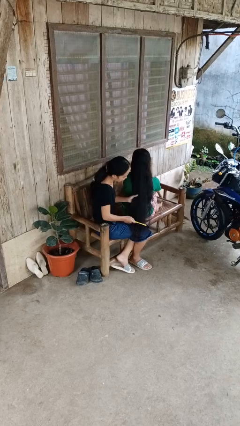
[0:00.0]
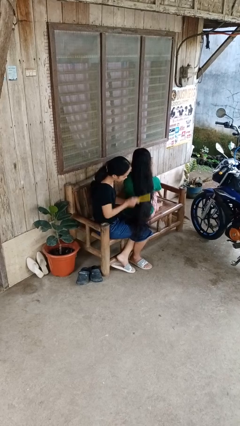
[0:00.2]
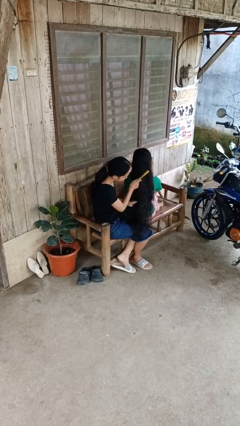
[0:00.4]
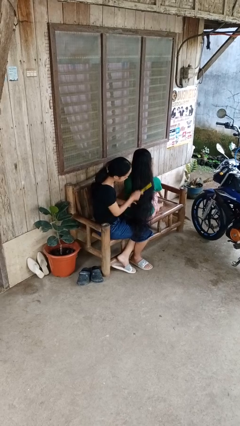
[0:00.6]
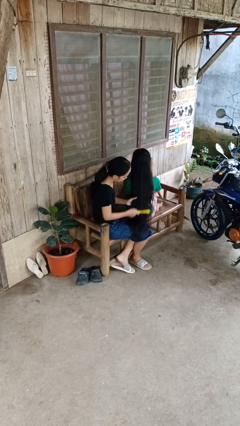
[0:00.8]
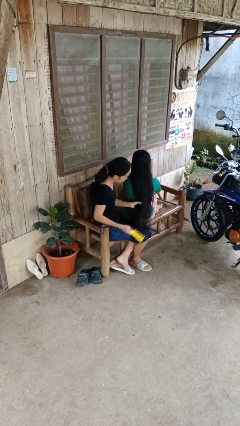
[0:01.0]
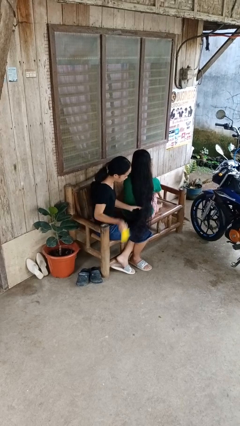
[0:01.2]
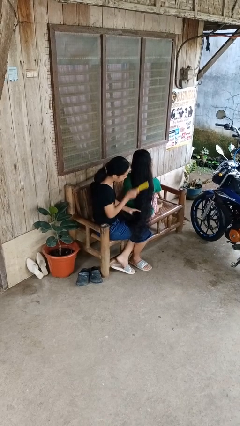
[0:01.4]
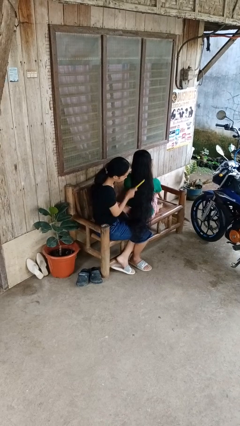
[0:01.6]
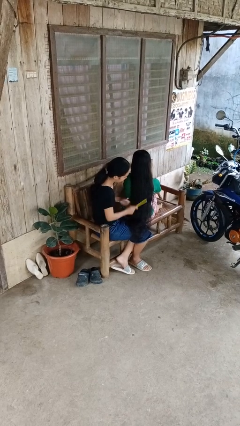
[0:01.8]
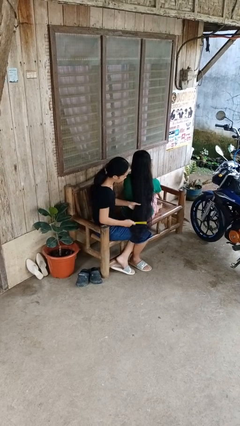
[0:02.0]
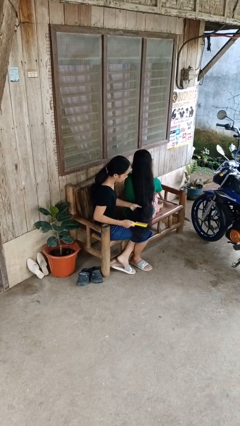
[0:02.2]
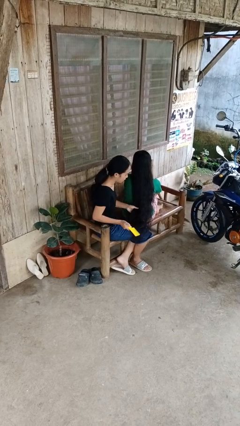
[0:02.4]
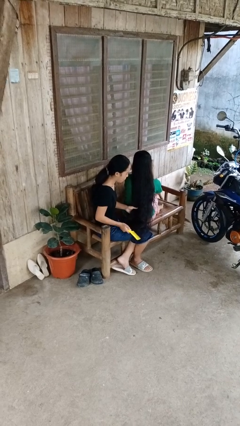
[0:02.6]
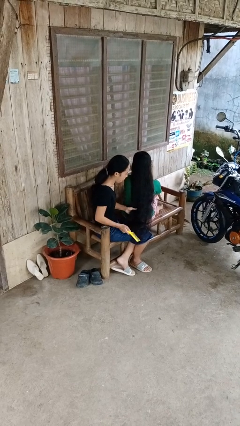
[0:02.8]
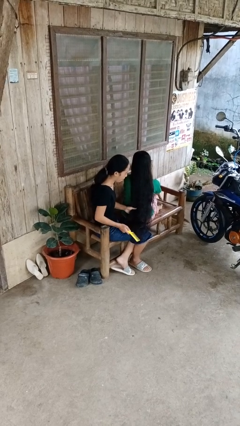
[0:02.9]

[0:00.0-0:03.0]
person brushes hair of person

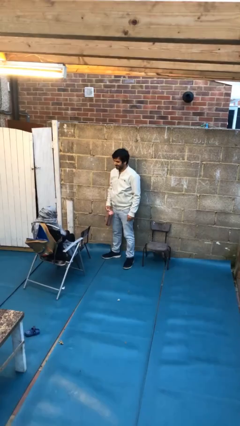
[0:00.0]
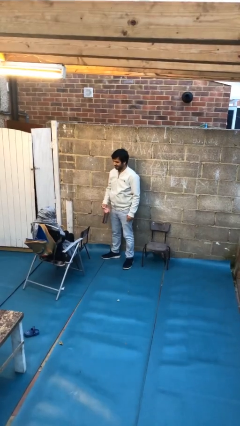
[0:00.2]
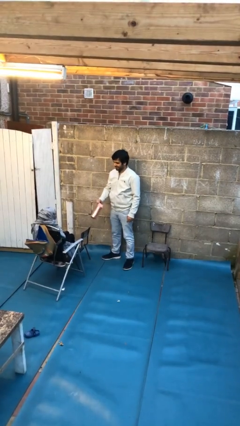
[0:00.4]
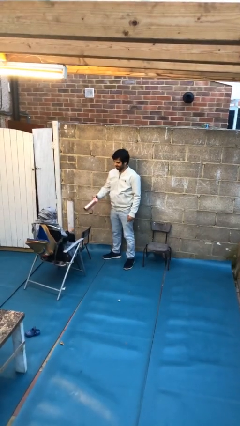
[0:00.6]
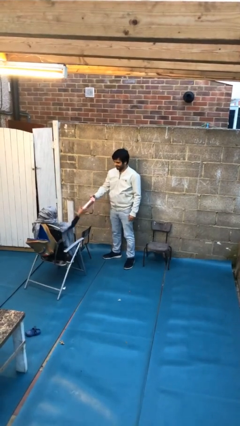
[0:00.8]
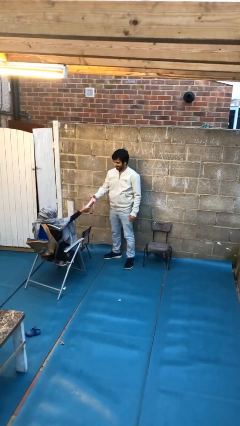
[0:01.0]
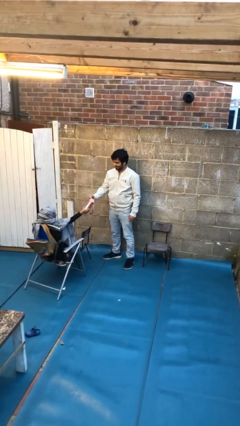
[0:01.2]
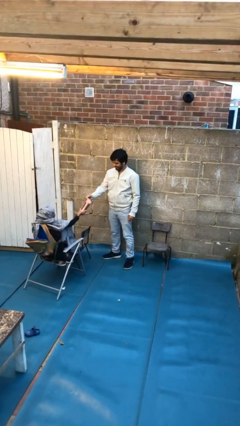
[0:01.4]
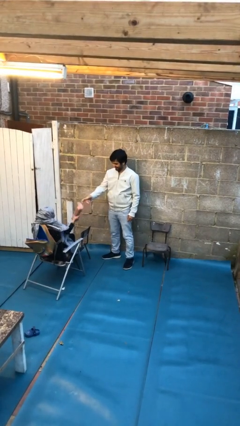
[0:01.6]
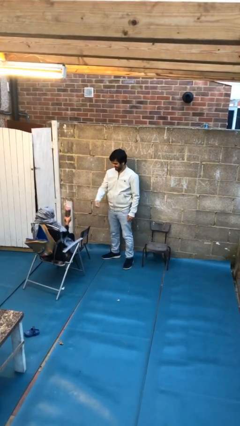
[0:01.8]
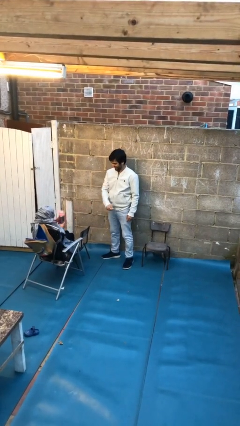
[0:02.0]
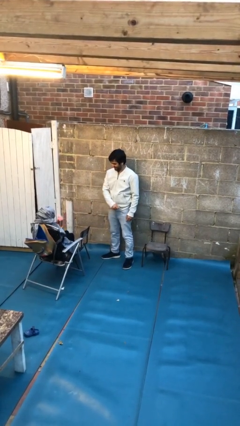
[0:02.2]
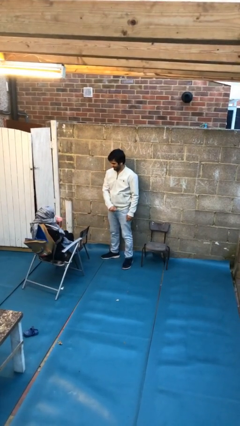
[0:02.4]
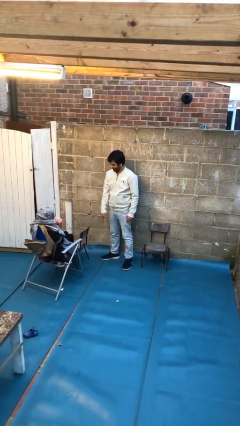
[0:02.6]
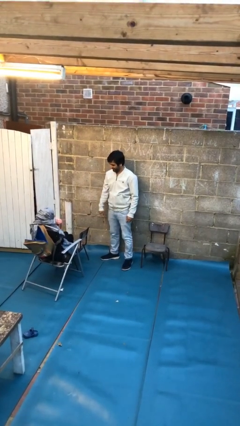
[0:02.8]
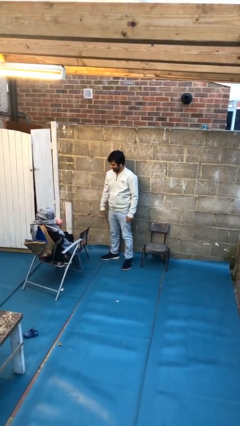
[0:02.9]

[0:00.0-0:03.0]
person transfers object to person

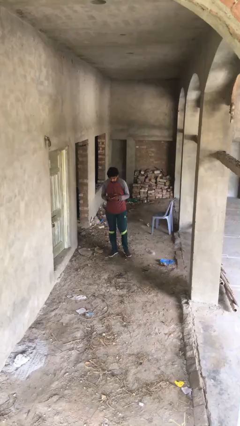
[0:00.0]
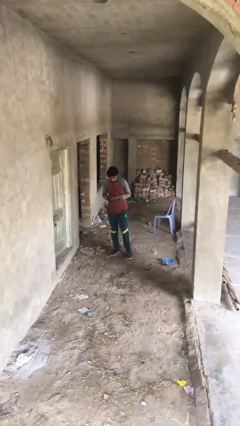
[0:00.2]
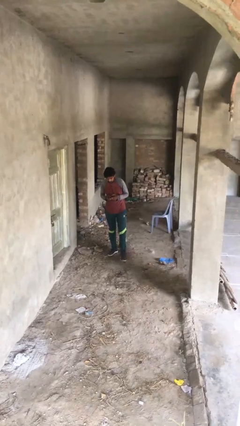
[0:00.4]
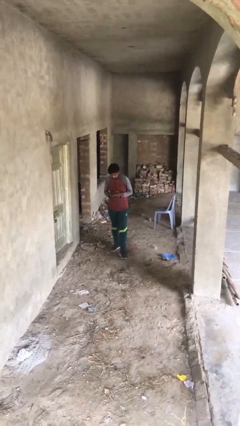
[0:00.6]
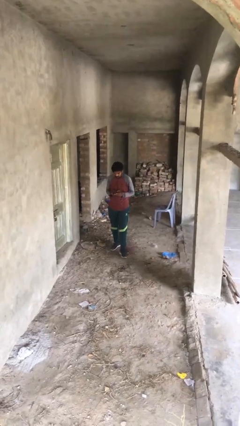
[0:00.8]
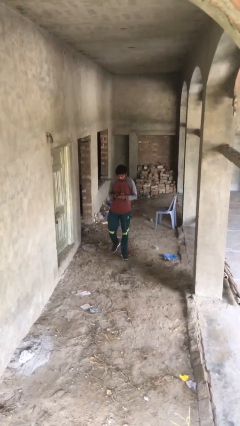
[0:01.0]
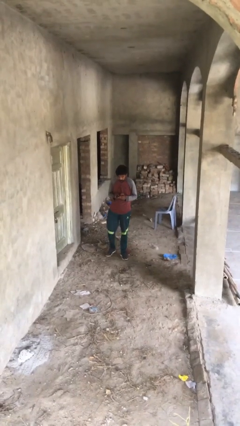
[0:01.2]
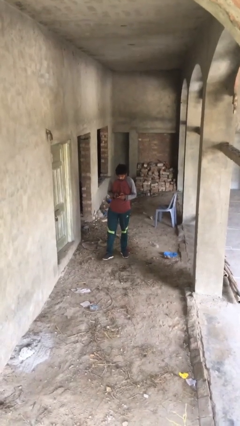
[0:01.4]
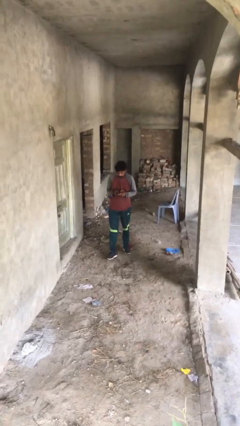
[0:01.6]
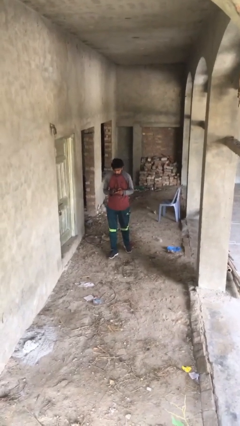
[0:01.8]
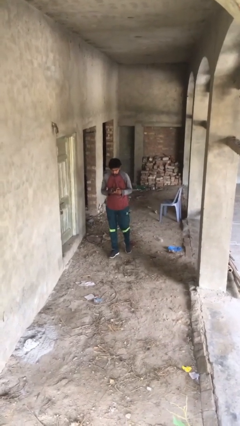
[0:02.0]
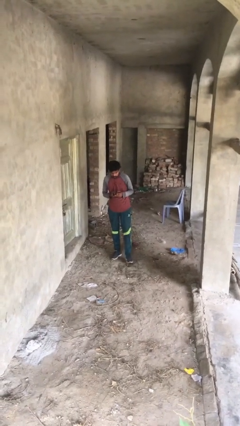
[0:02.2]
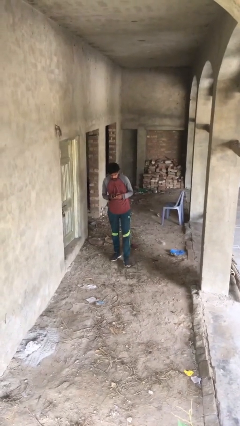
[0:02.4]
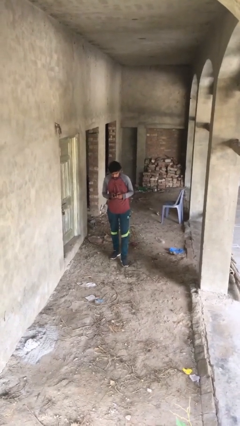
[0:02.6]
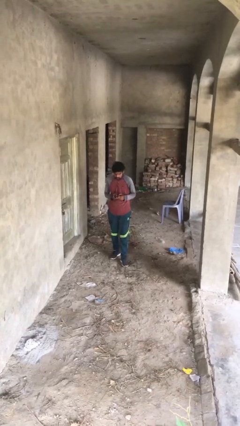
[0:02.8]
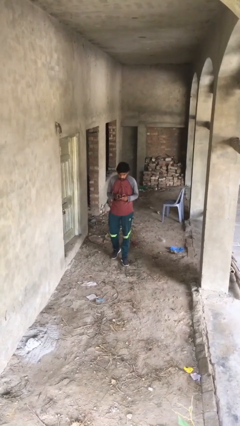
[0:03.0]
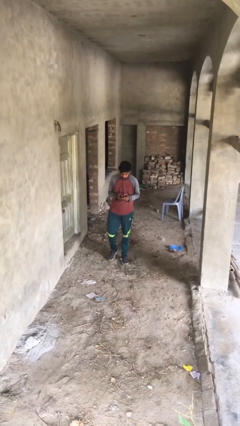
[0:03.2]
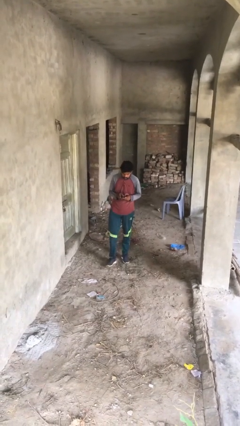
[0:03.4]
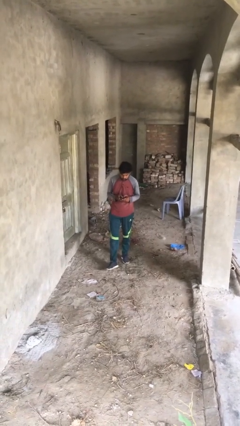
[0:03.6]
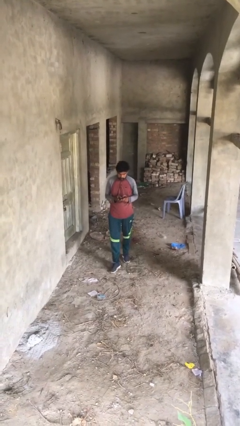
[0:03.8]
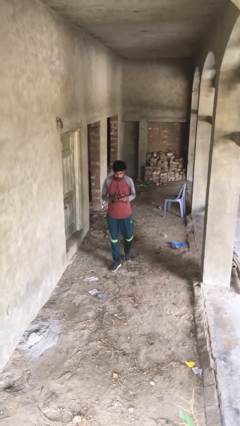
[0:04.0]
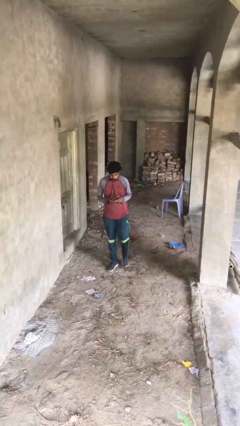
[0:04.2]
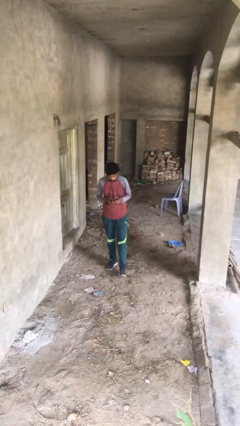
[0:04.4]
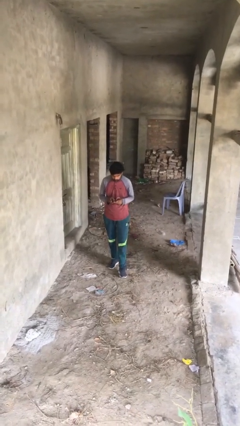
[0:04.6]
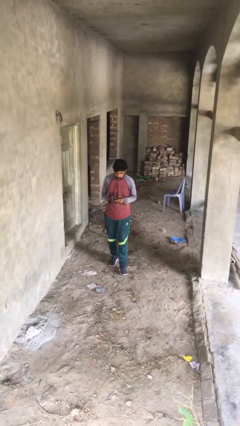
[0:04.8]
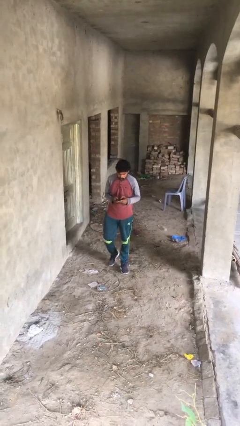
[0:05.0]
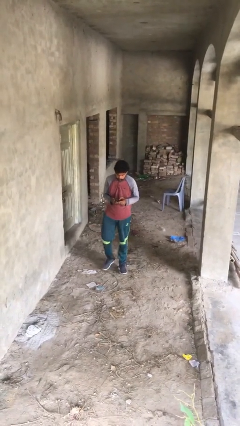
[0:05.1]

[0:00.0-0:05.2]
person texts on phone

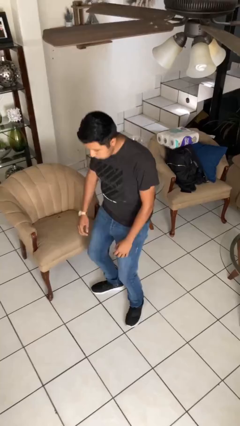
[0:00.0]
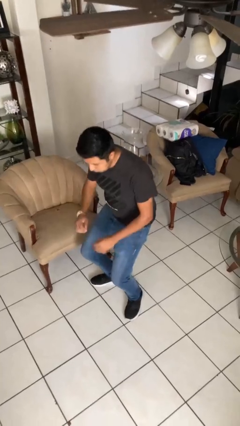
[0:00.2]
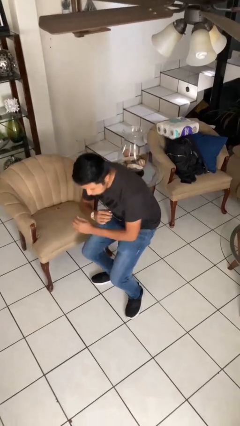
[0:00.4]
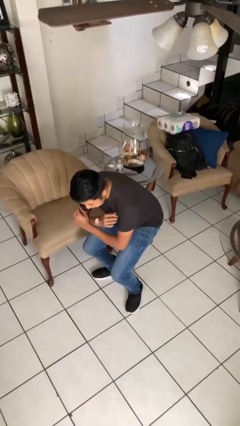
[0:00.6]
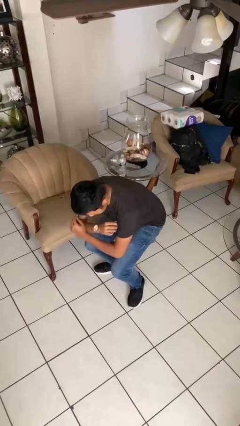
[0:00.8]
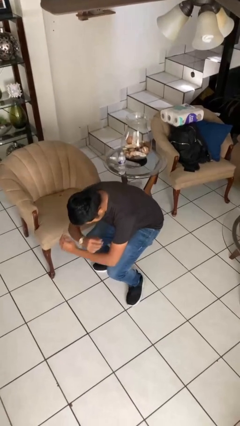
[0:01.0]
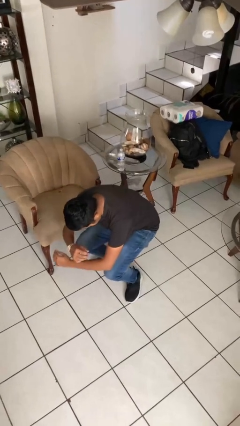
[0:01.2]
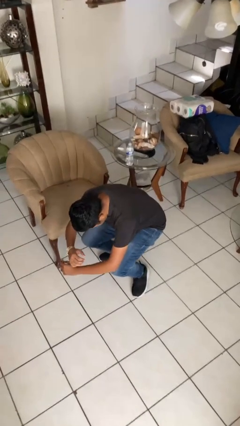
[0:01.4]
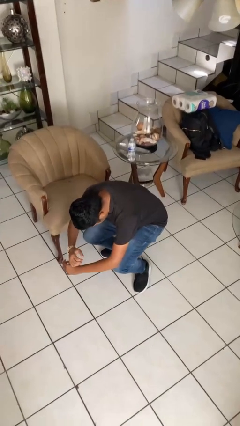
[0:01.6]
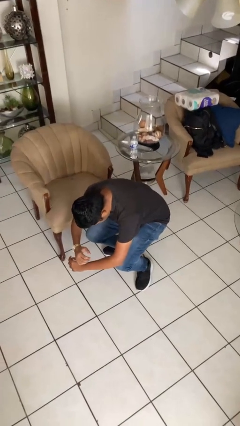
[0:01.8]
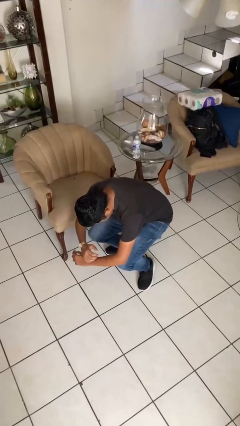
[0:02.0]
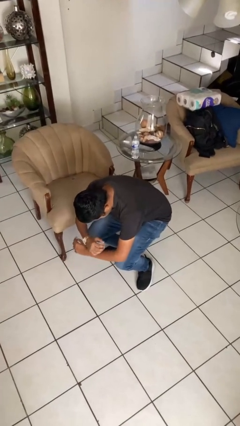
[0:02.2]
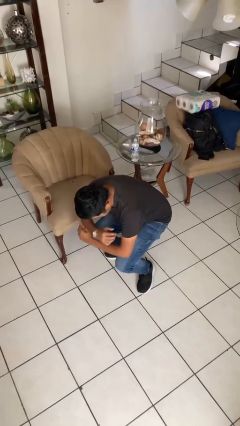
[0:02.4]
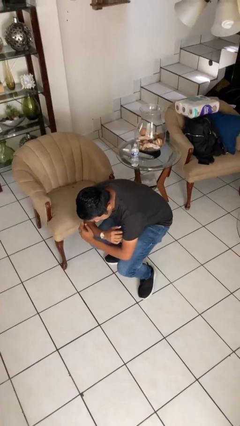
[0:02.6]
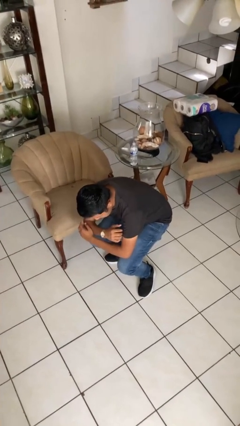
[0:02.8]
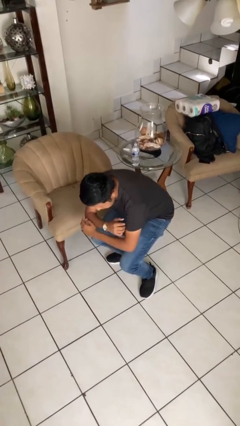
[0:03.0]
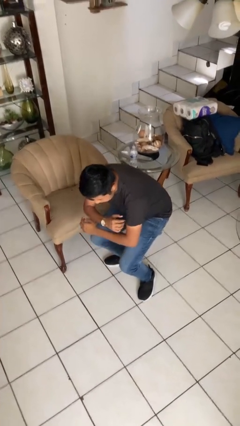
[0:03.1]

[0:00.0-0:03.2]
person squats

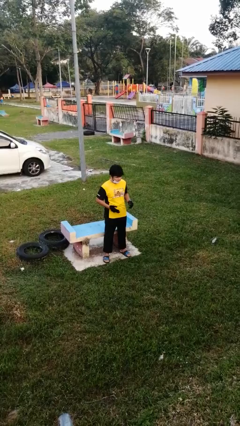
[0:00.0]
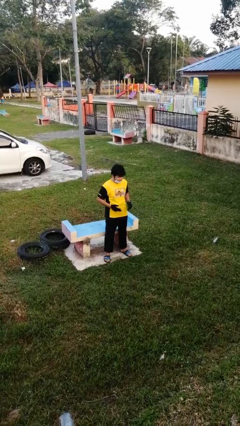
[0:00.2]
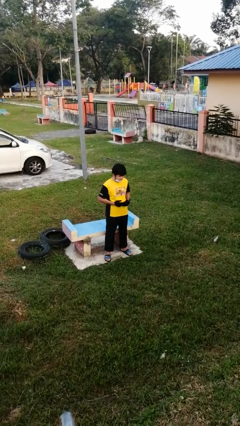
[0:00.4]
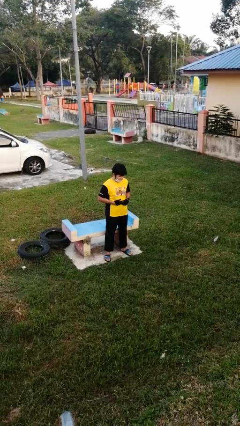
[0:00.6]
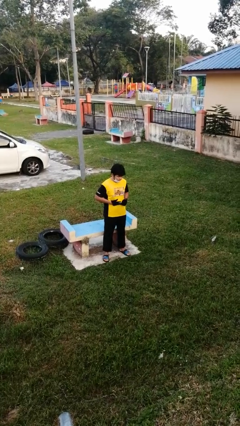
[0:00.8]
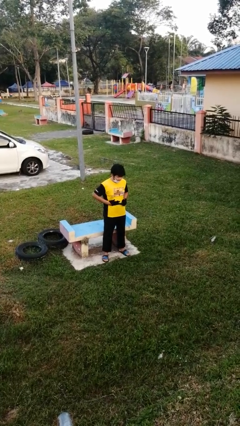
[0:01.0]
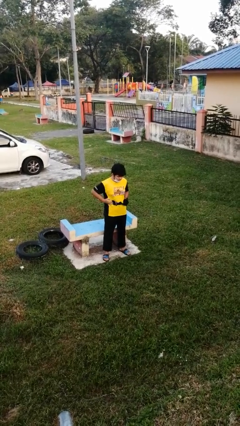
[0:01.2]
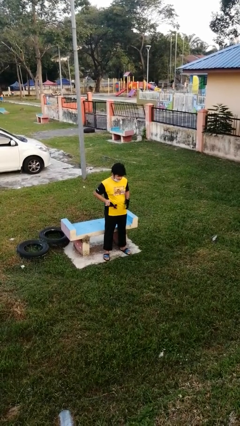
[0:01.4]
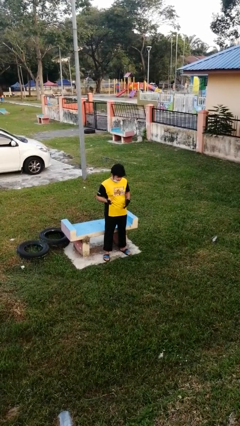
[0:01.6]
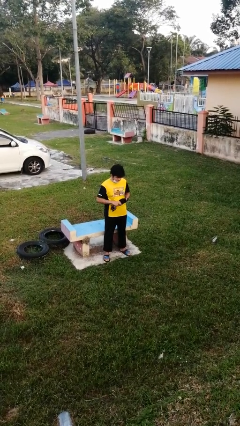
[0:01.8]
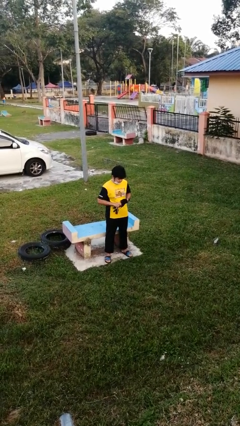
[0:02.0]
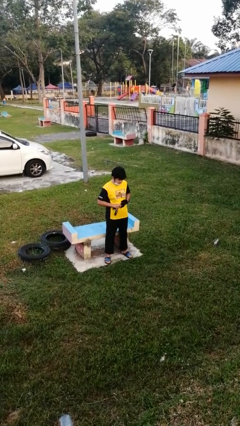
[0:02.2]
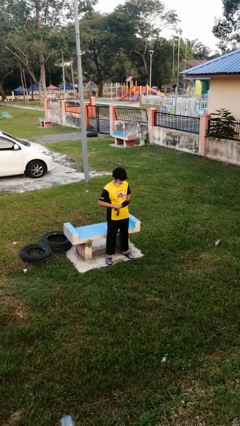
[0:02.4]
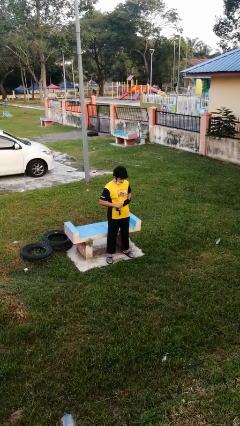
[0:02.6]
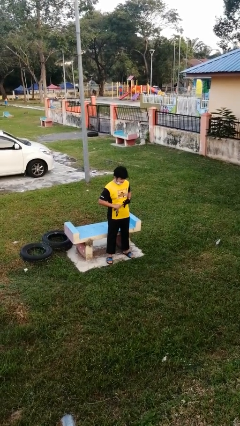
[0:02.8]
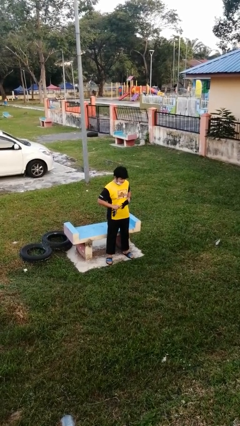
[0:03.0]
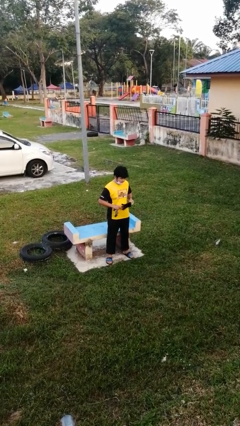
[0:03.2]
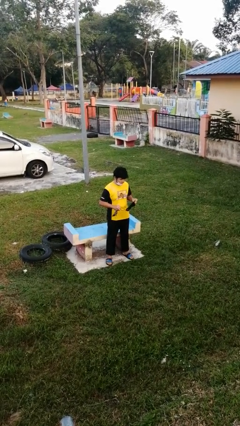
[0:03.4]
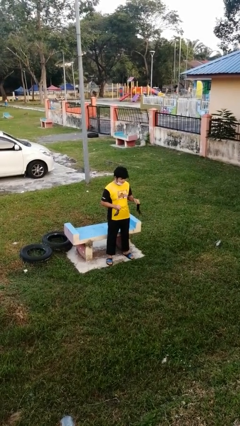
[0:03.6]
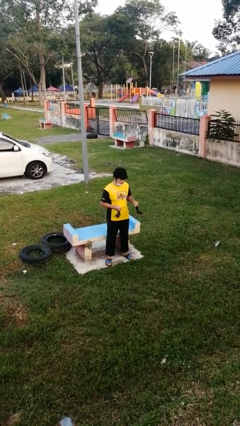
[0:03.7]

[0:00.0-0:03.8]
person takes off gloves
